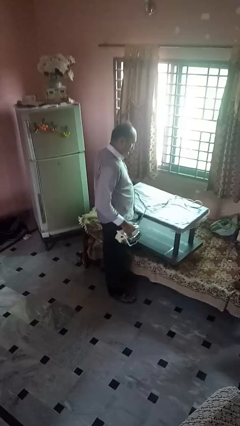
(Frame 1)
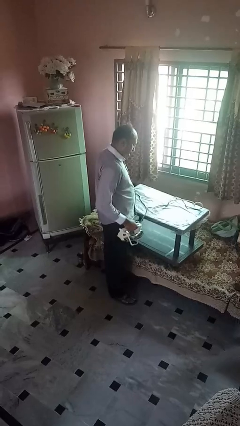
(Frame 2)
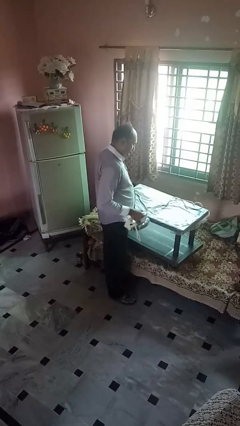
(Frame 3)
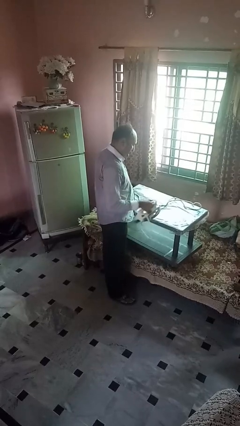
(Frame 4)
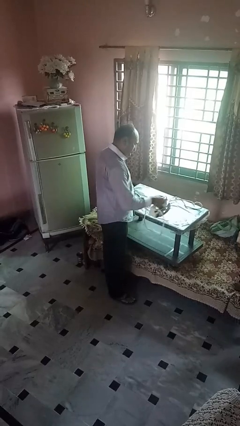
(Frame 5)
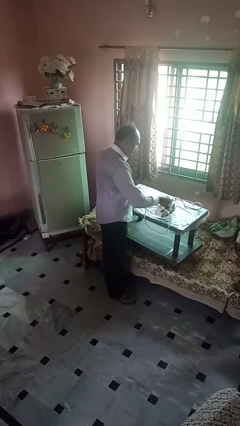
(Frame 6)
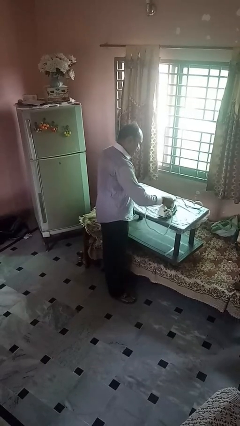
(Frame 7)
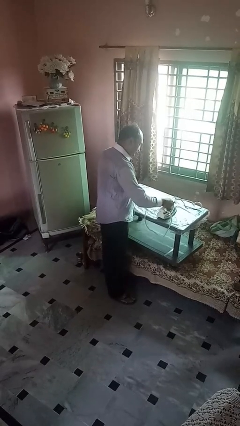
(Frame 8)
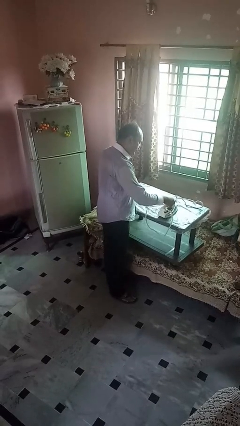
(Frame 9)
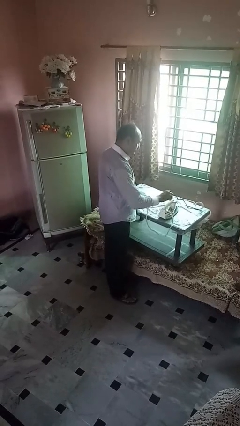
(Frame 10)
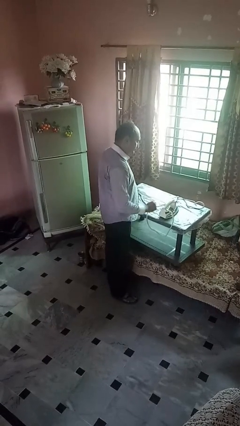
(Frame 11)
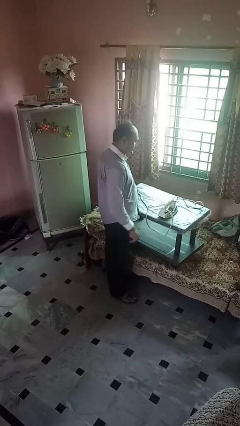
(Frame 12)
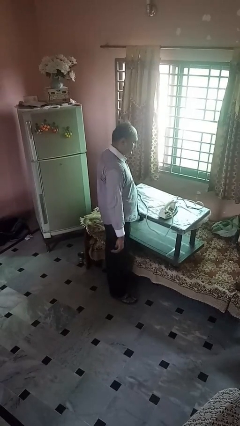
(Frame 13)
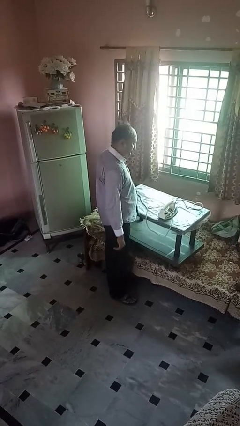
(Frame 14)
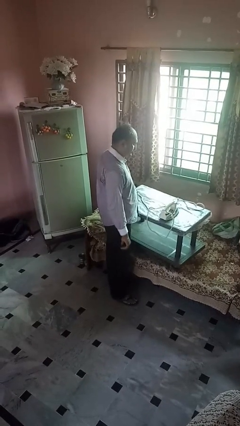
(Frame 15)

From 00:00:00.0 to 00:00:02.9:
person puts down object on countertop

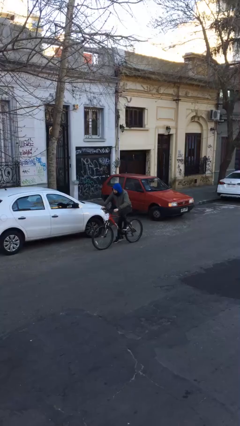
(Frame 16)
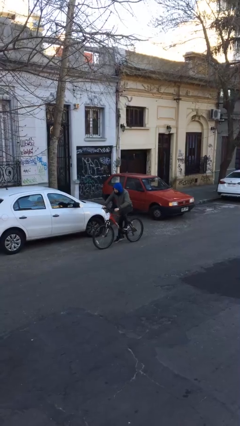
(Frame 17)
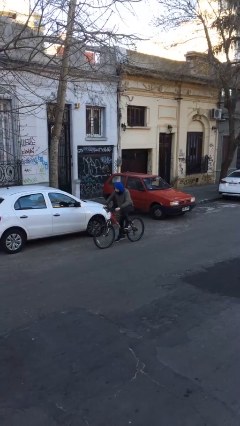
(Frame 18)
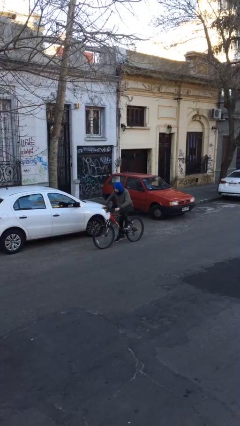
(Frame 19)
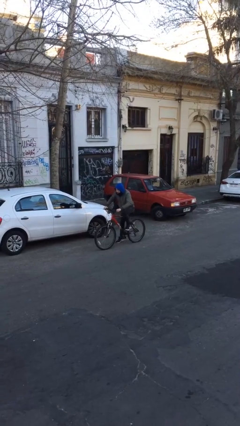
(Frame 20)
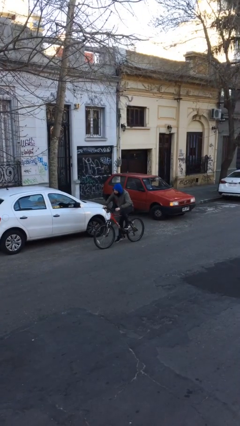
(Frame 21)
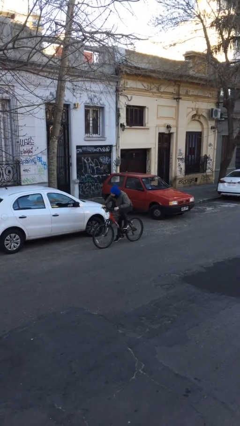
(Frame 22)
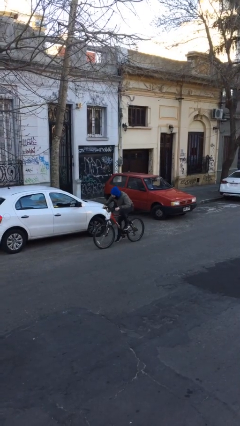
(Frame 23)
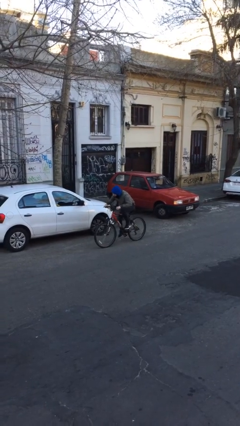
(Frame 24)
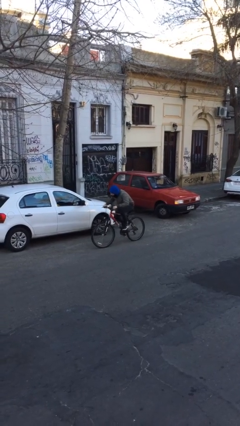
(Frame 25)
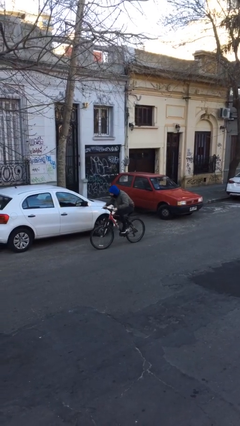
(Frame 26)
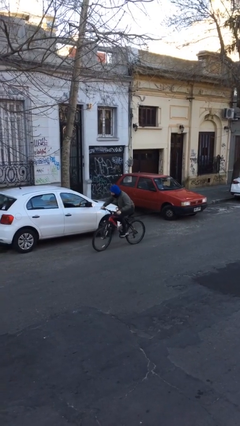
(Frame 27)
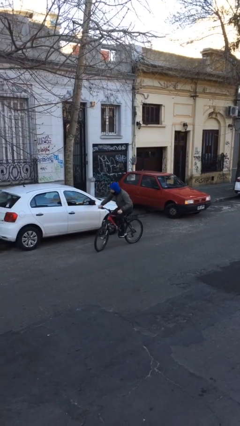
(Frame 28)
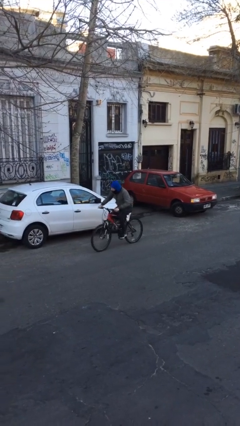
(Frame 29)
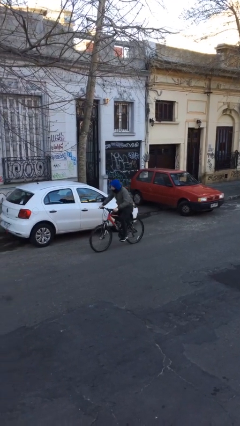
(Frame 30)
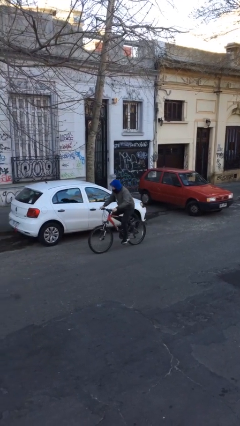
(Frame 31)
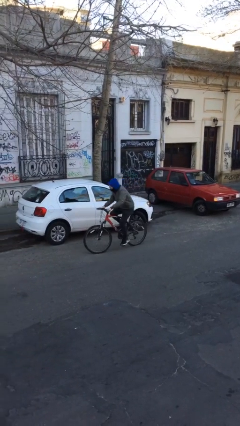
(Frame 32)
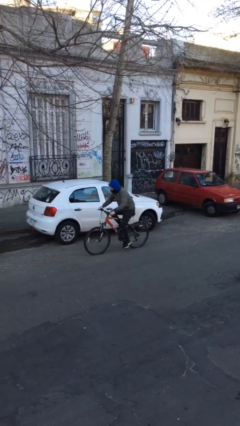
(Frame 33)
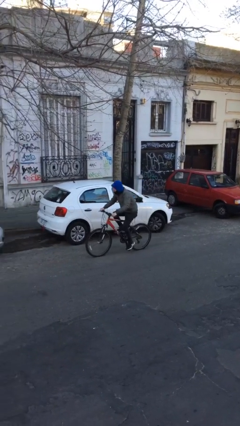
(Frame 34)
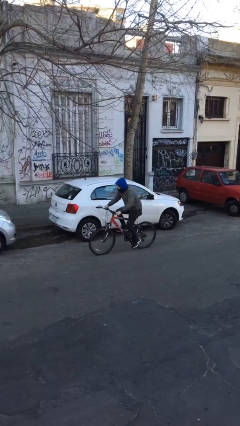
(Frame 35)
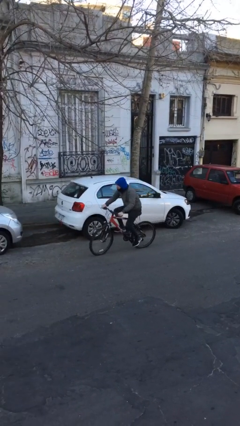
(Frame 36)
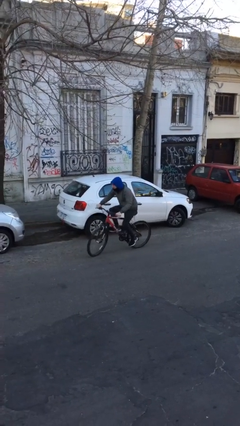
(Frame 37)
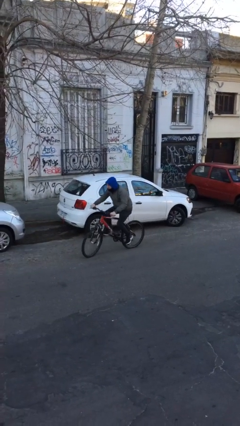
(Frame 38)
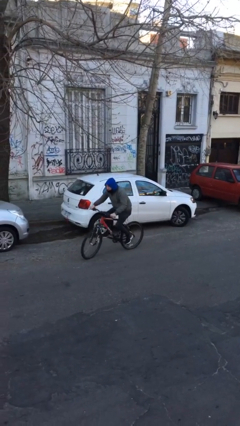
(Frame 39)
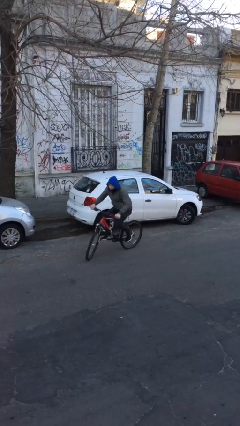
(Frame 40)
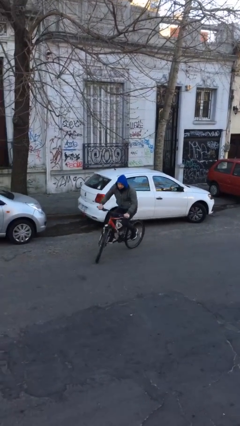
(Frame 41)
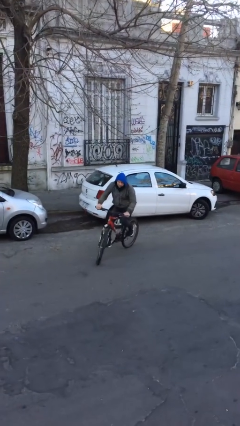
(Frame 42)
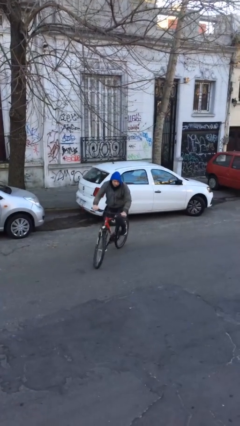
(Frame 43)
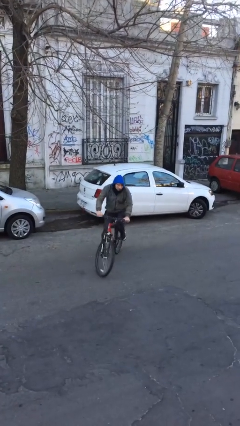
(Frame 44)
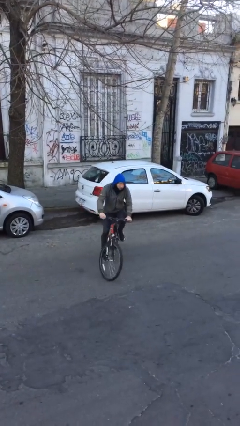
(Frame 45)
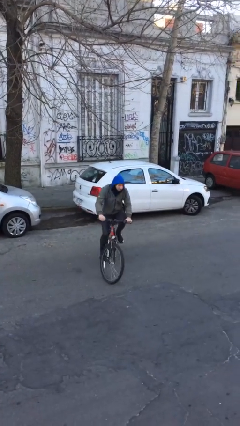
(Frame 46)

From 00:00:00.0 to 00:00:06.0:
person rides bicycle

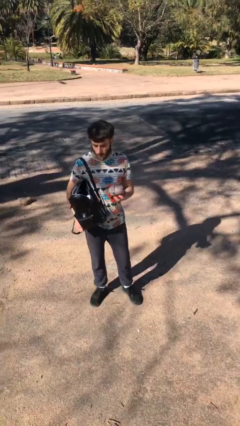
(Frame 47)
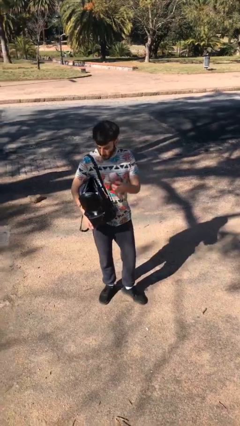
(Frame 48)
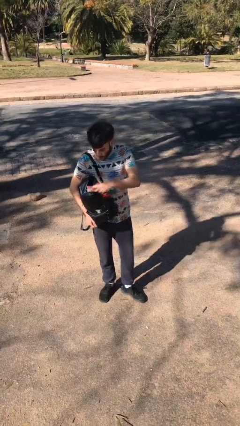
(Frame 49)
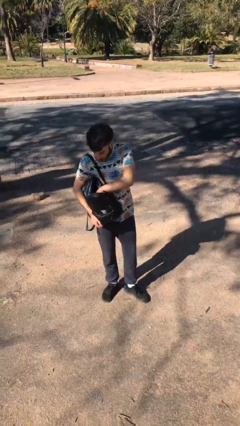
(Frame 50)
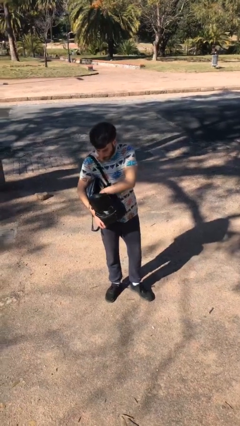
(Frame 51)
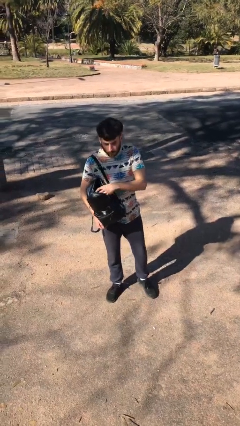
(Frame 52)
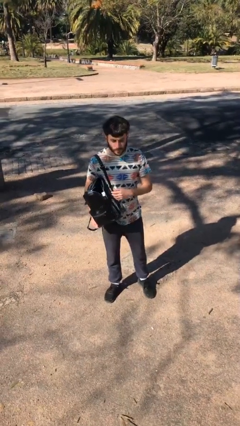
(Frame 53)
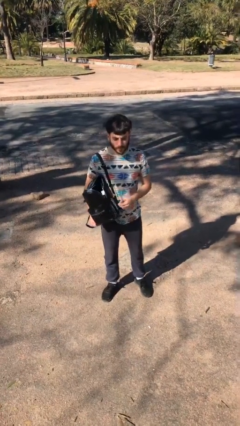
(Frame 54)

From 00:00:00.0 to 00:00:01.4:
person puts object into backpack

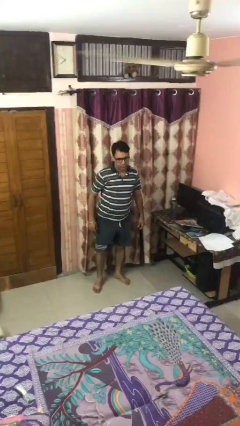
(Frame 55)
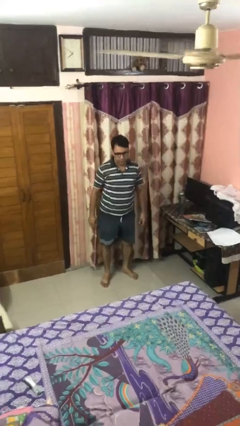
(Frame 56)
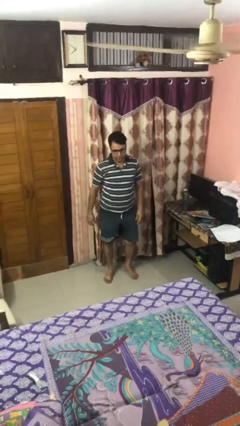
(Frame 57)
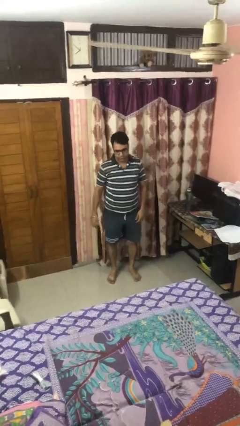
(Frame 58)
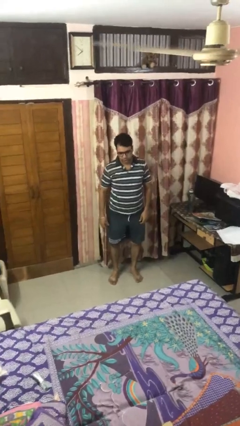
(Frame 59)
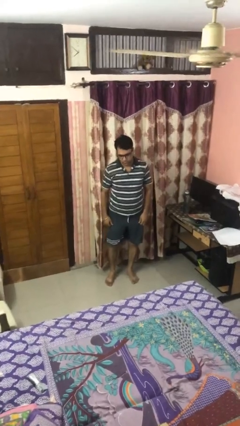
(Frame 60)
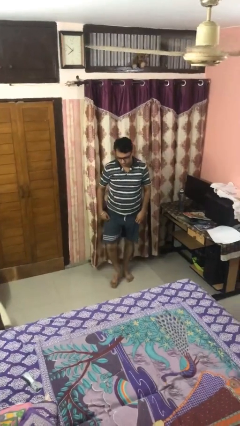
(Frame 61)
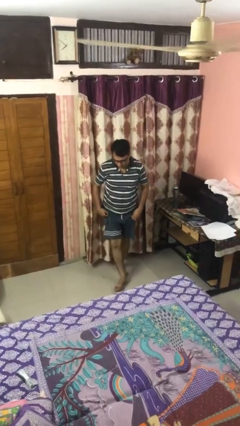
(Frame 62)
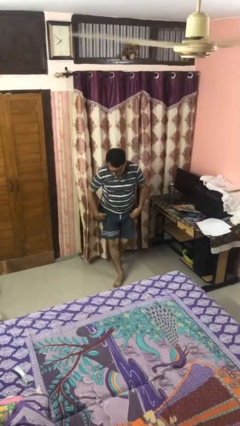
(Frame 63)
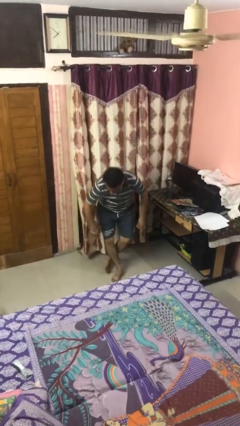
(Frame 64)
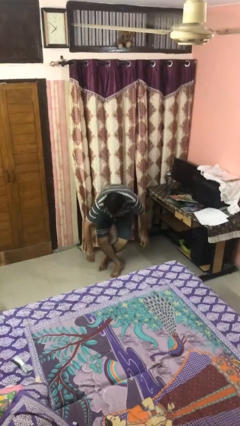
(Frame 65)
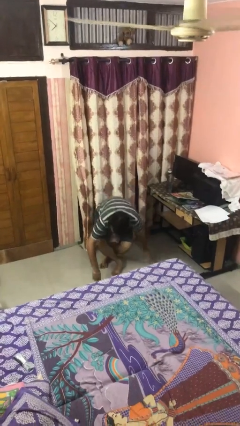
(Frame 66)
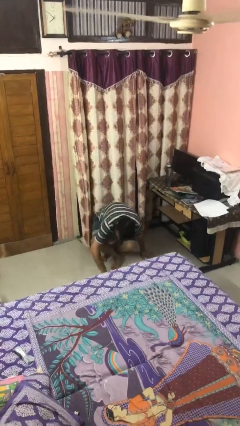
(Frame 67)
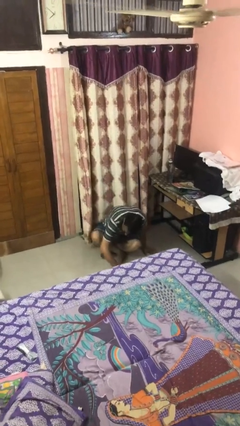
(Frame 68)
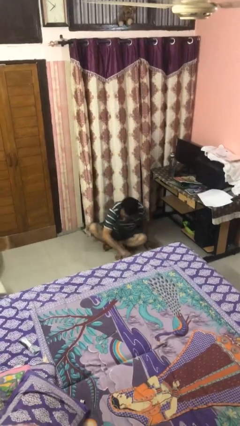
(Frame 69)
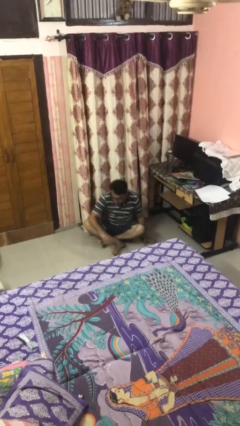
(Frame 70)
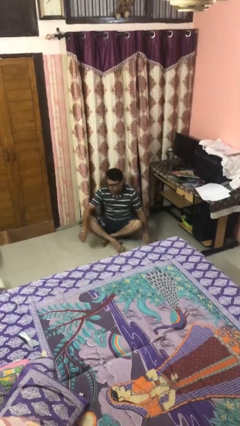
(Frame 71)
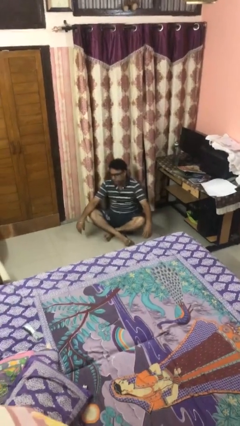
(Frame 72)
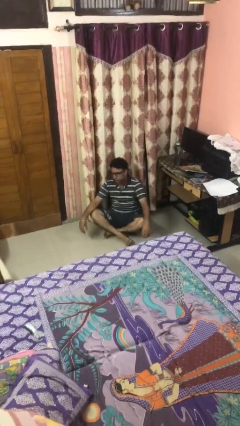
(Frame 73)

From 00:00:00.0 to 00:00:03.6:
person sits crisscross

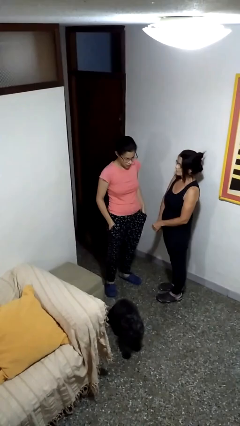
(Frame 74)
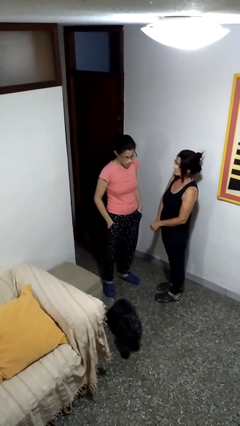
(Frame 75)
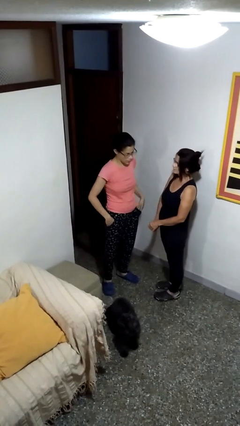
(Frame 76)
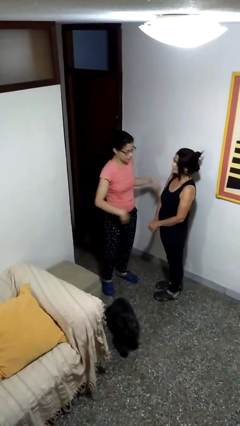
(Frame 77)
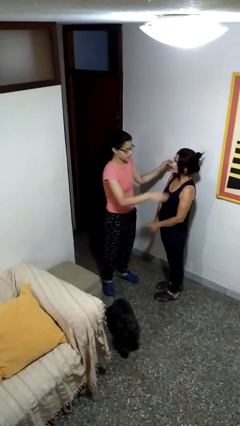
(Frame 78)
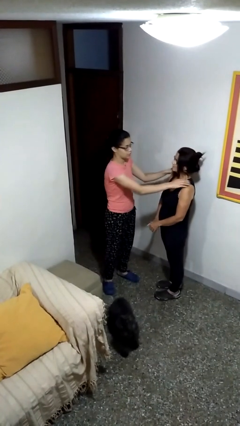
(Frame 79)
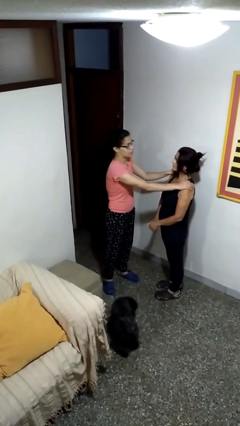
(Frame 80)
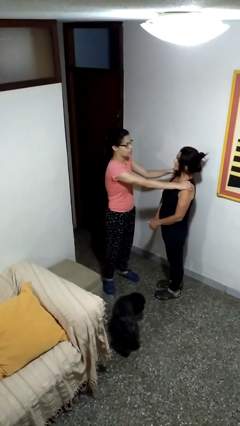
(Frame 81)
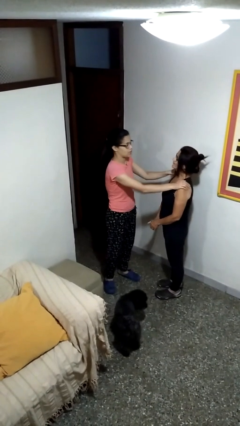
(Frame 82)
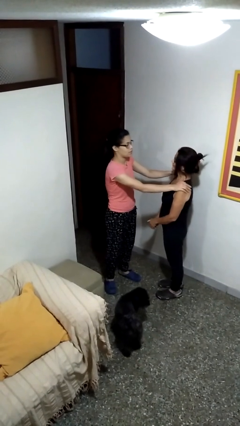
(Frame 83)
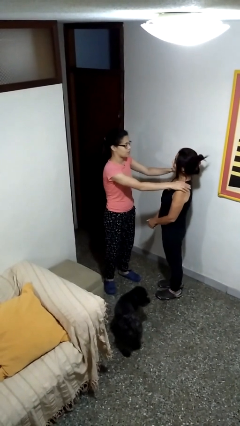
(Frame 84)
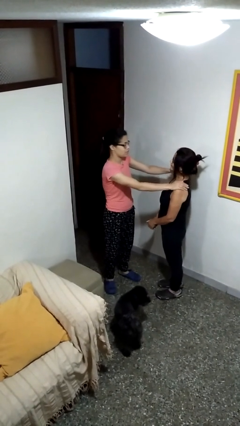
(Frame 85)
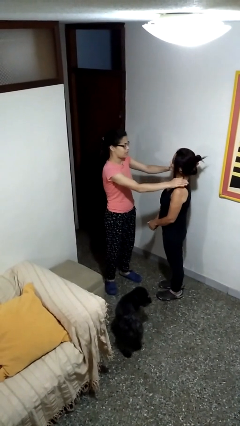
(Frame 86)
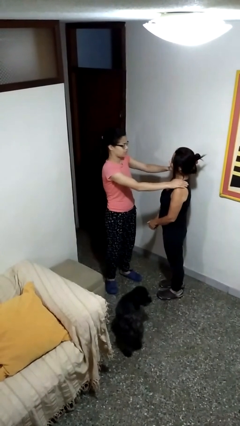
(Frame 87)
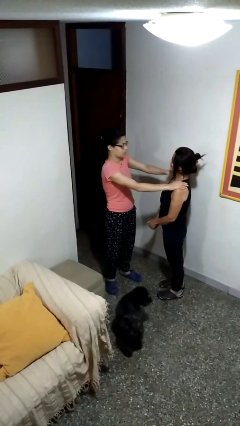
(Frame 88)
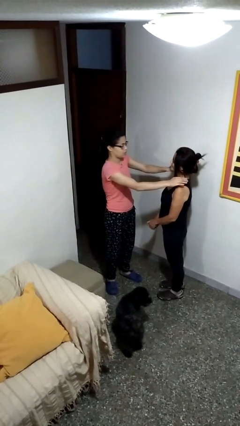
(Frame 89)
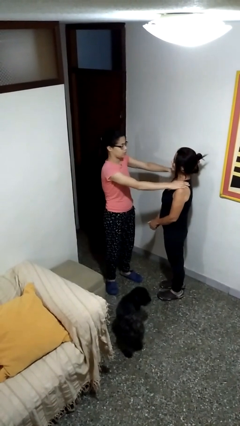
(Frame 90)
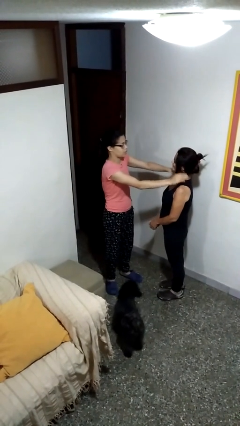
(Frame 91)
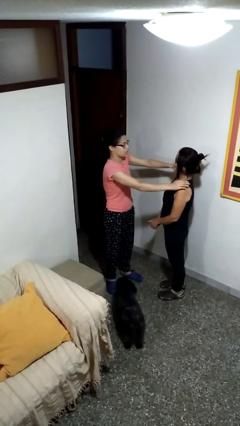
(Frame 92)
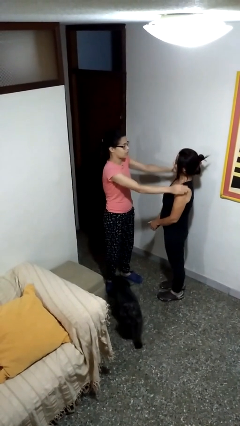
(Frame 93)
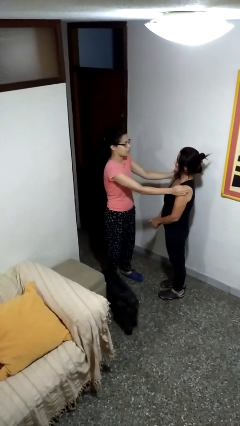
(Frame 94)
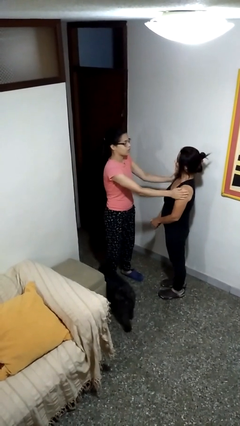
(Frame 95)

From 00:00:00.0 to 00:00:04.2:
person pounds shoulders of person
